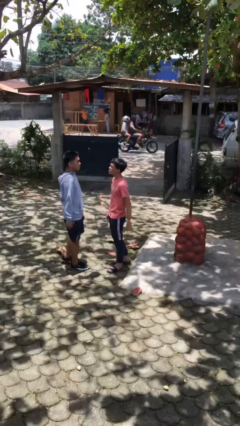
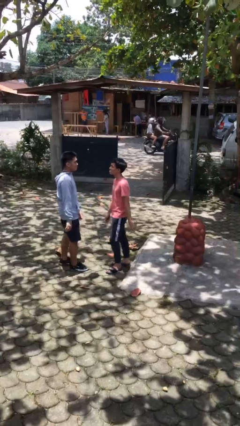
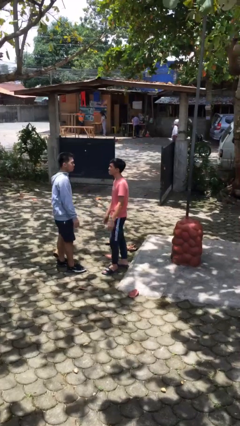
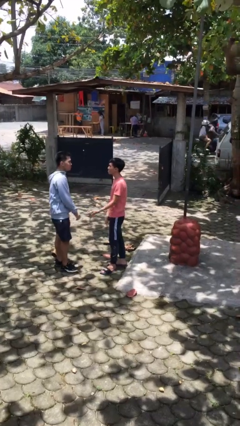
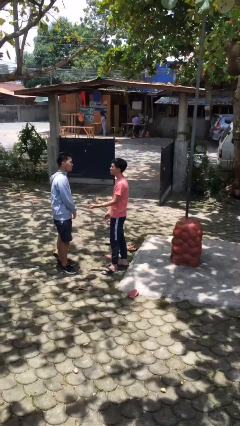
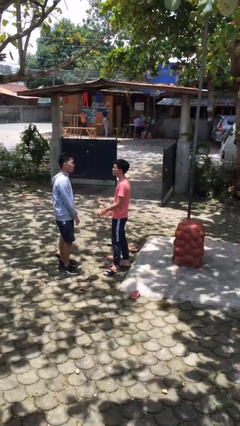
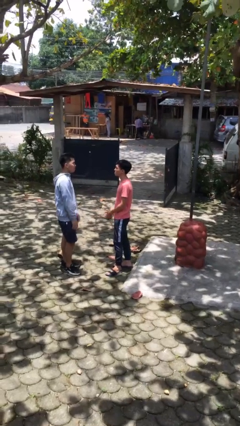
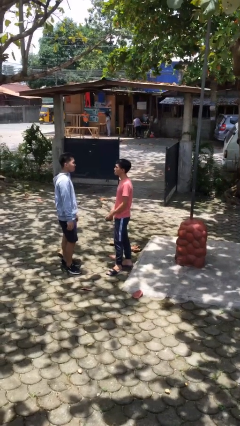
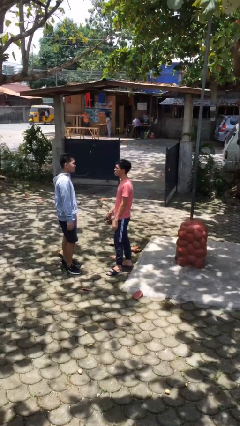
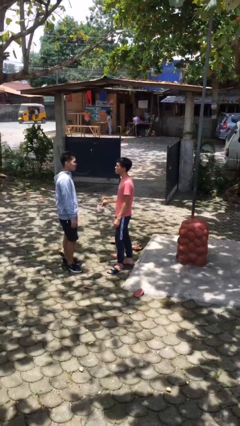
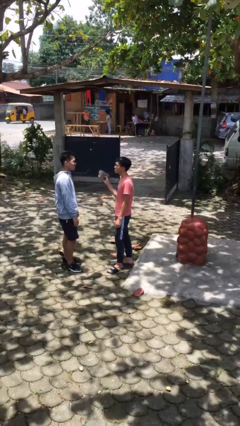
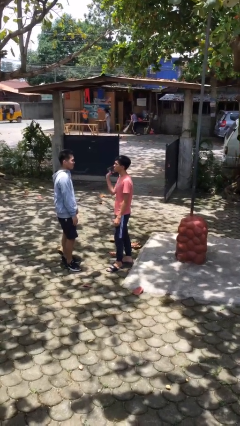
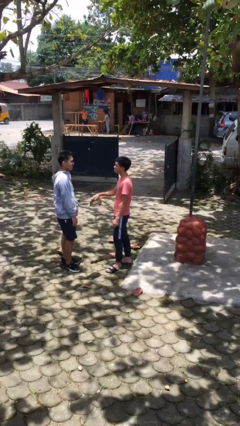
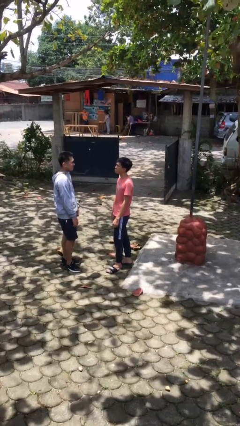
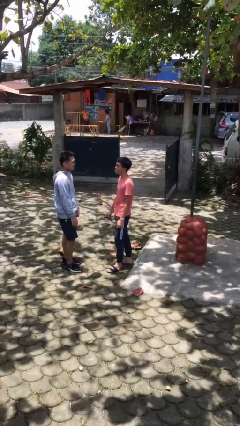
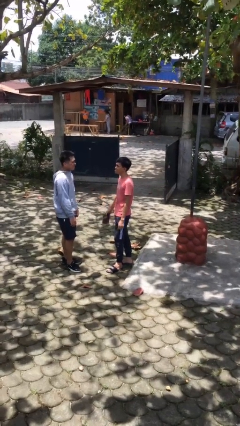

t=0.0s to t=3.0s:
person talks to person

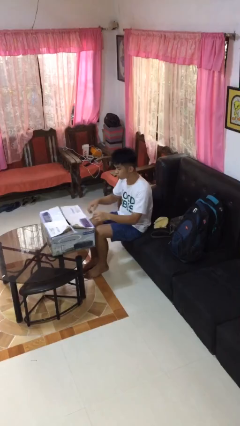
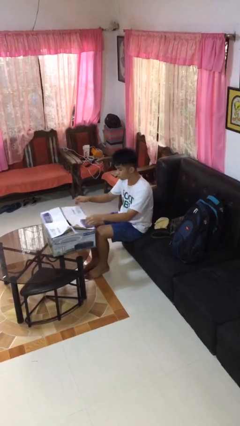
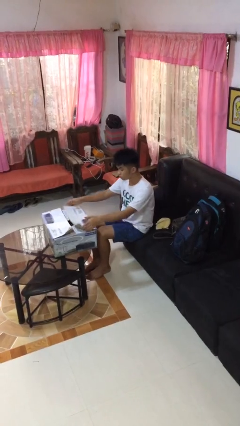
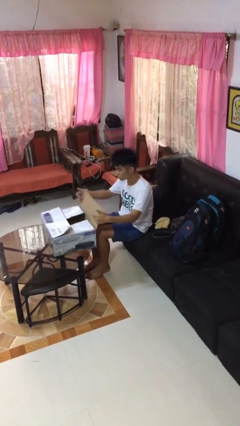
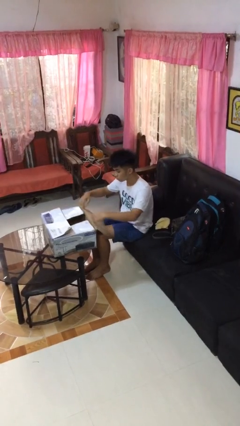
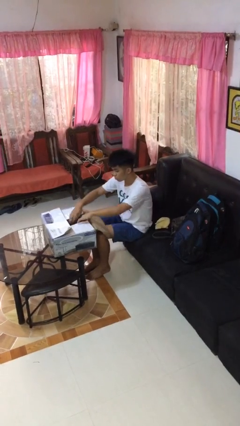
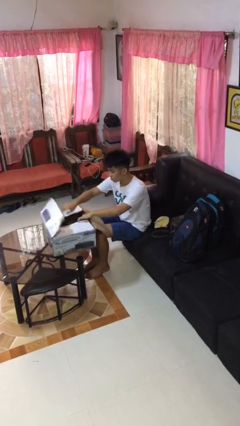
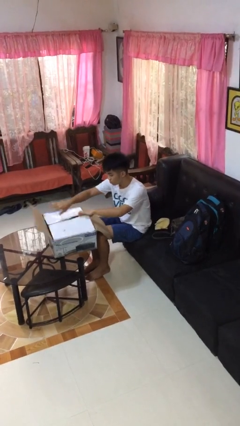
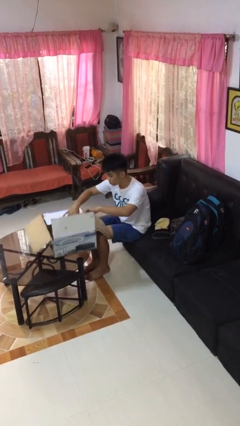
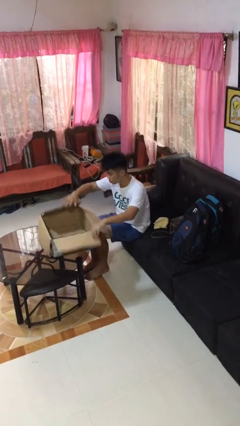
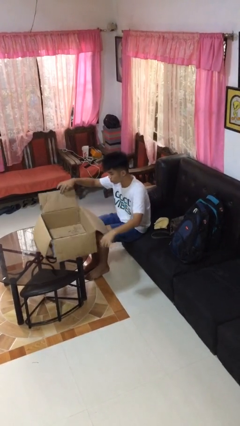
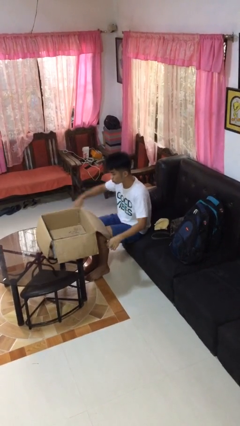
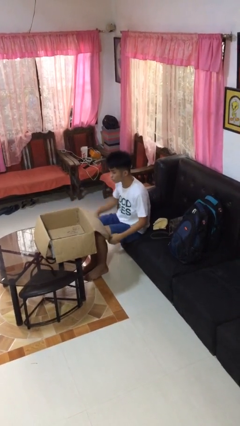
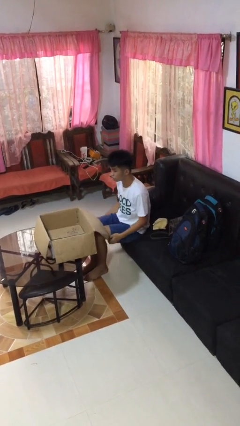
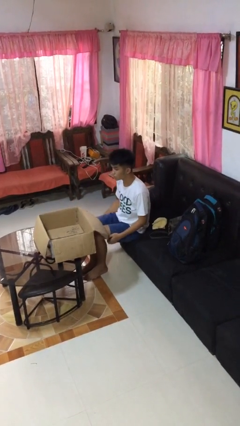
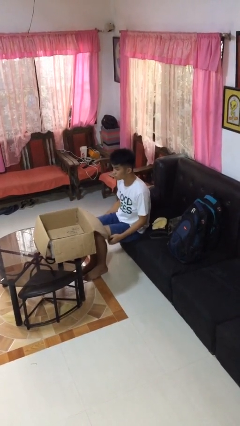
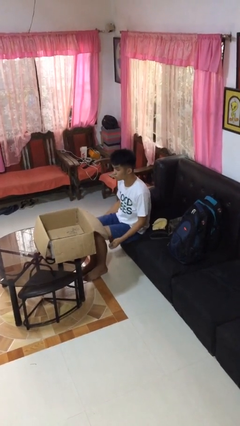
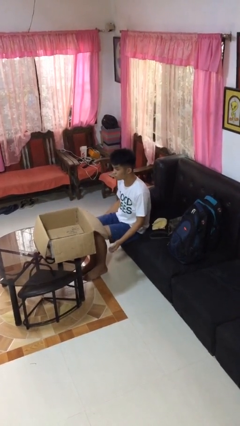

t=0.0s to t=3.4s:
person opens box

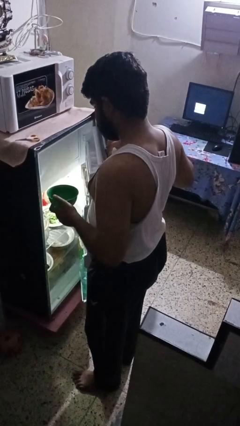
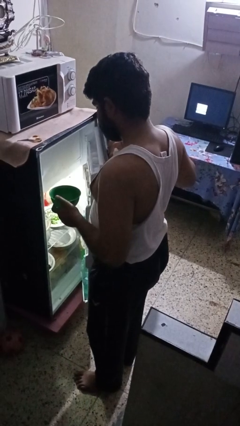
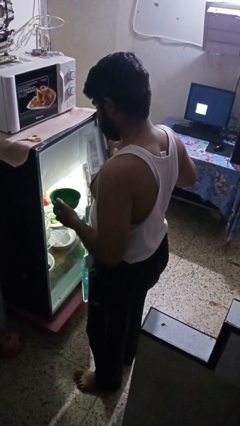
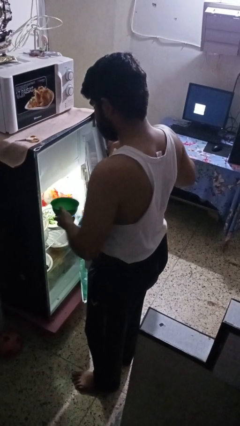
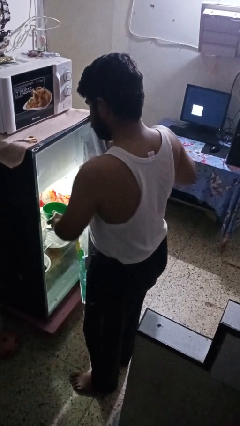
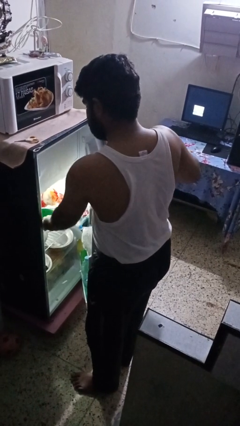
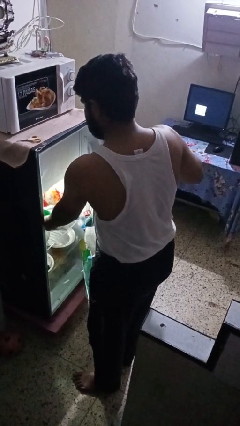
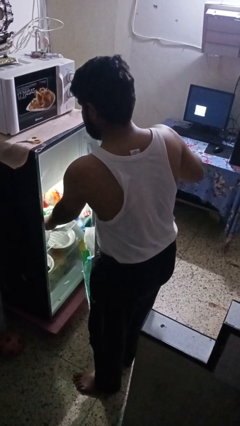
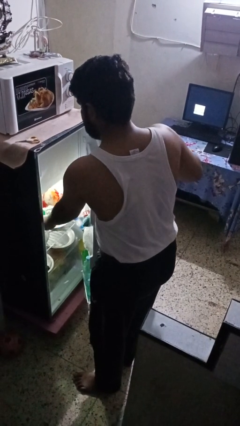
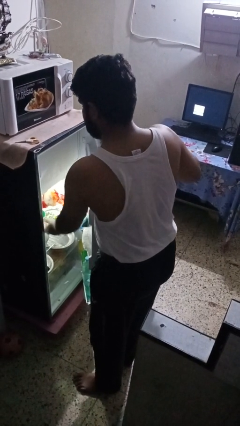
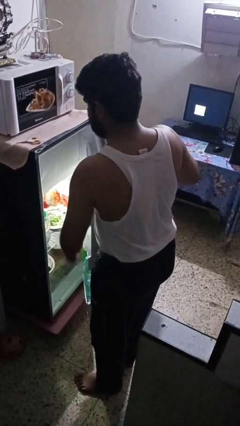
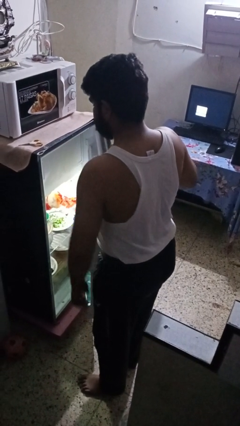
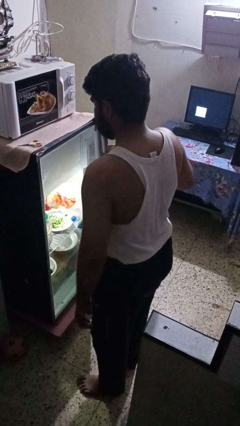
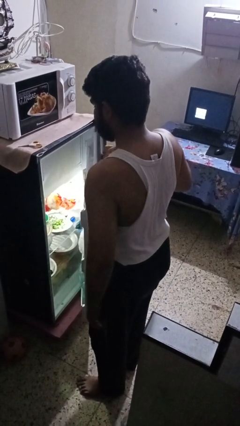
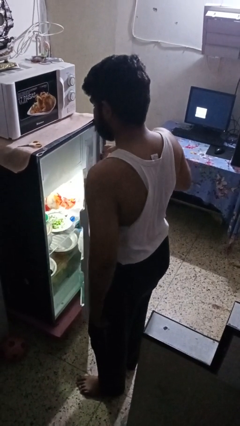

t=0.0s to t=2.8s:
person puts object into refrigerator

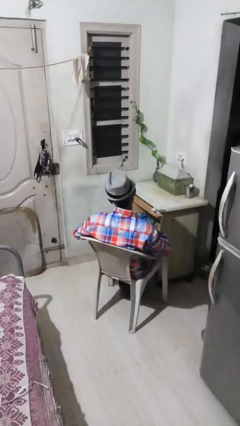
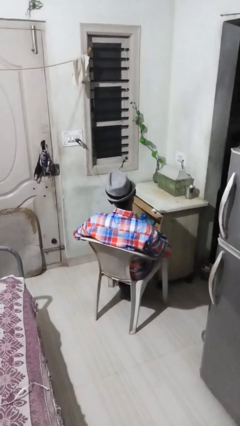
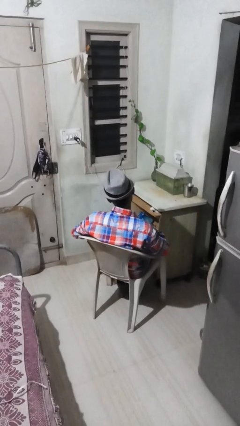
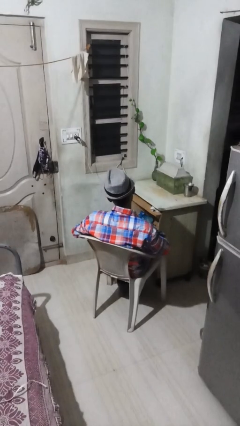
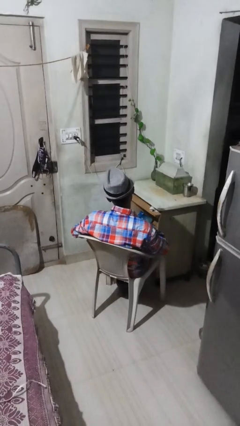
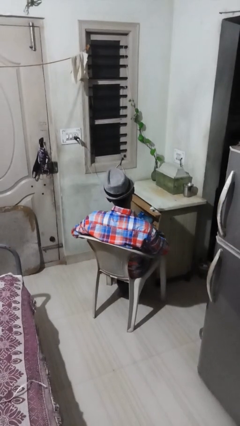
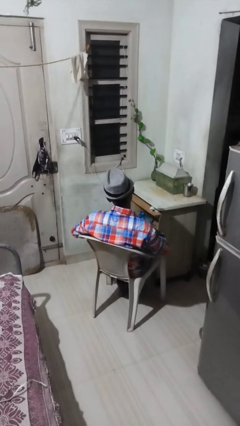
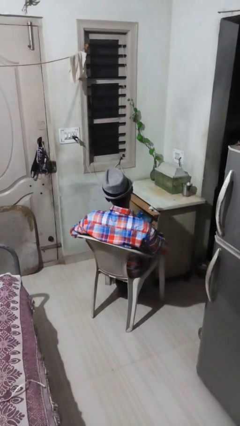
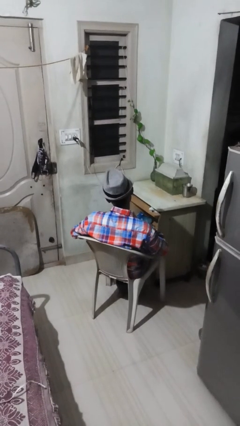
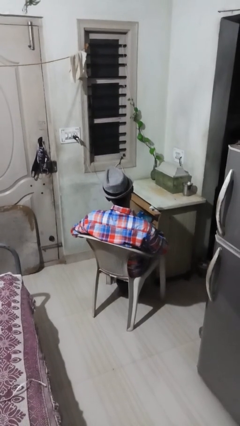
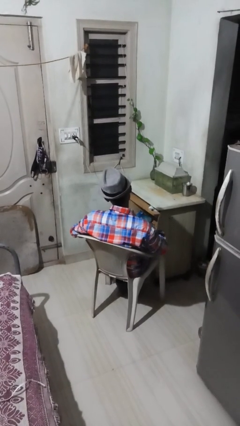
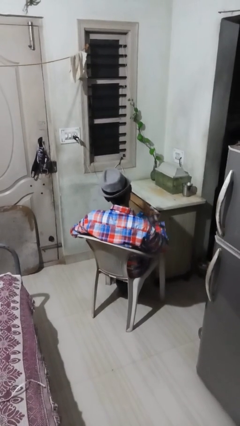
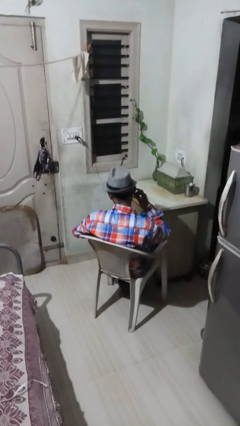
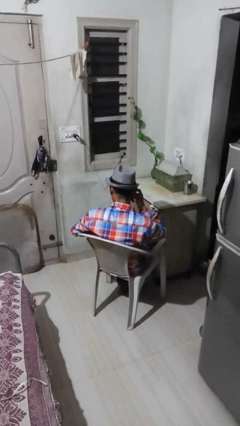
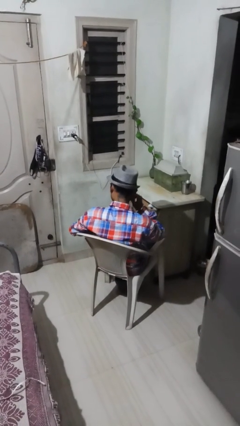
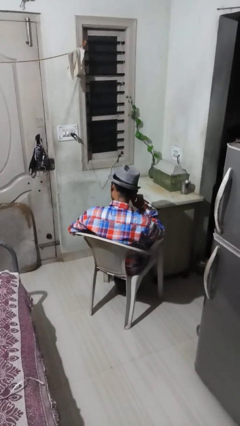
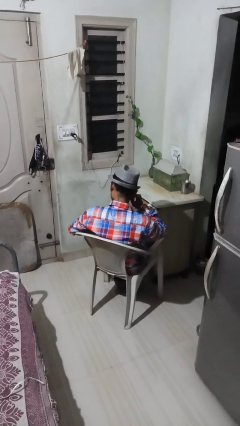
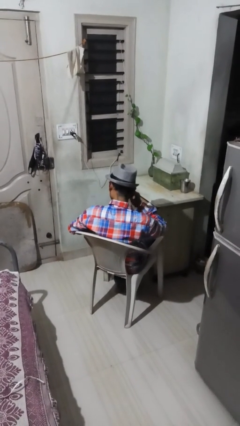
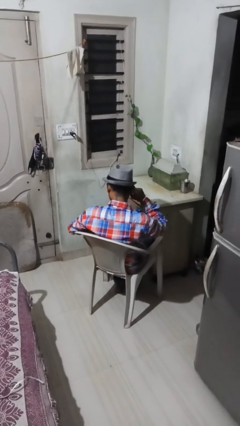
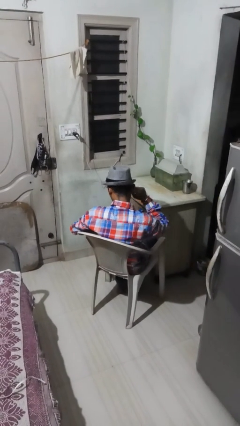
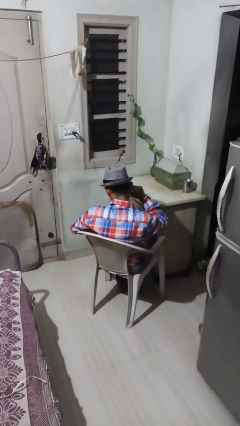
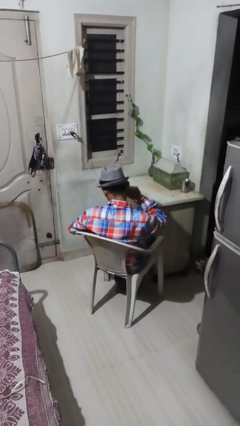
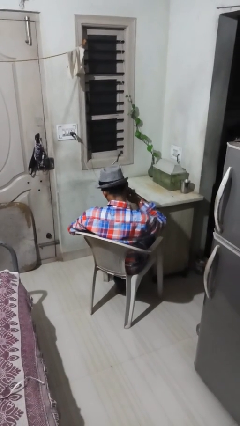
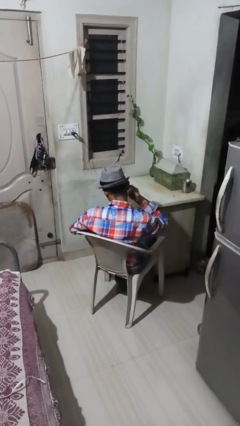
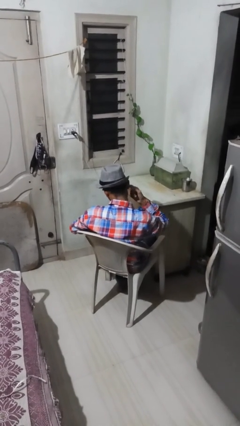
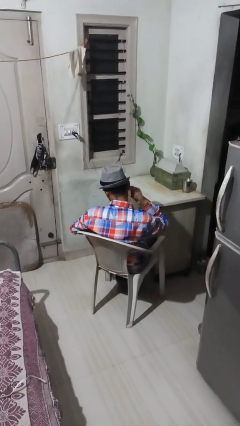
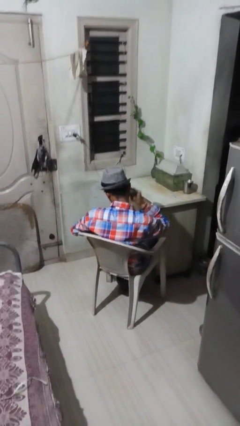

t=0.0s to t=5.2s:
person puts fingers in ear

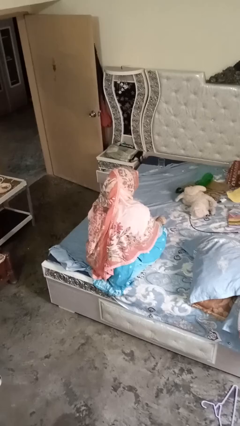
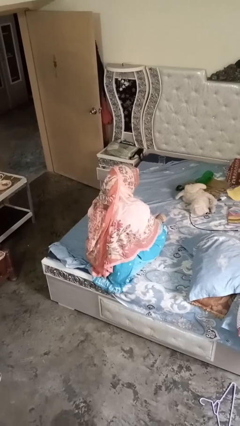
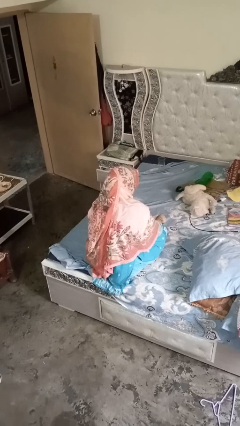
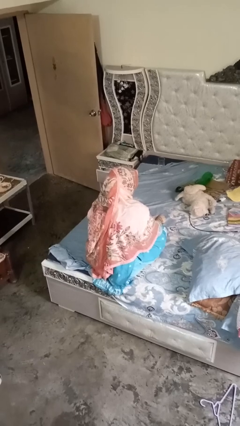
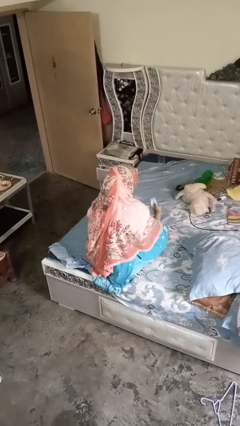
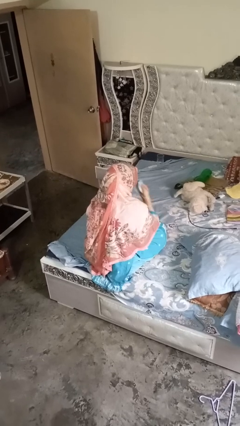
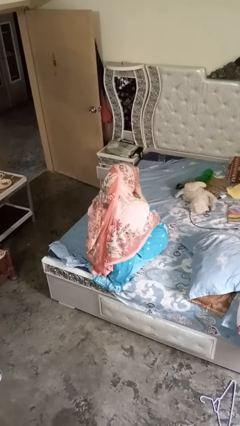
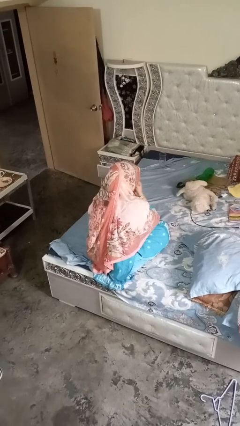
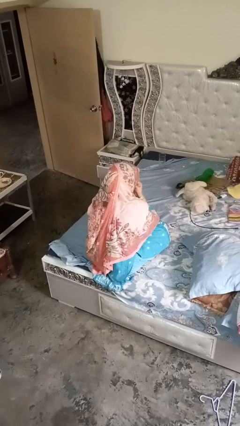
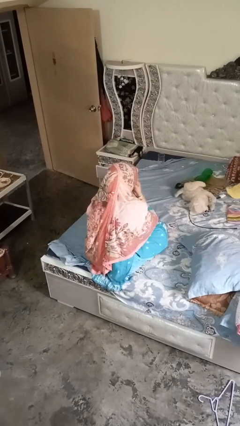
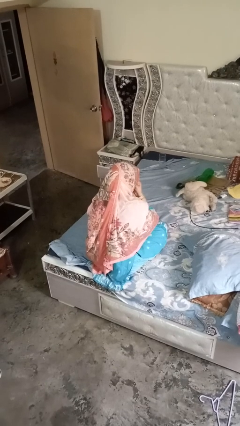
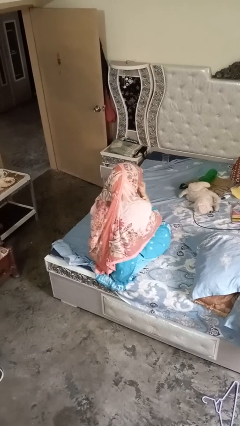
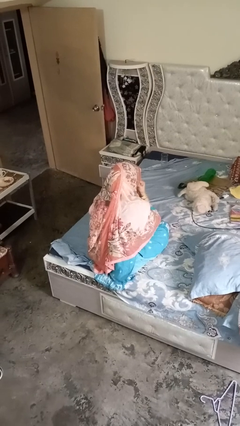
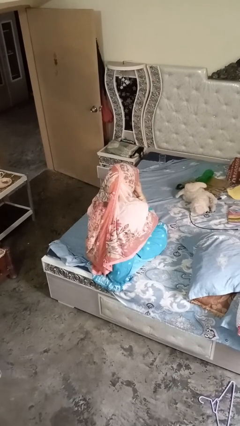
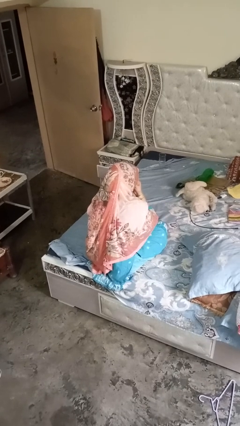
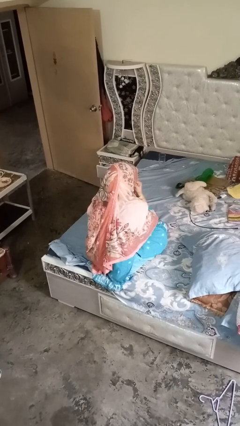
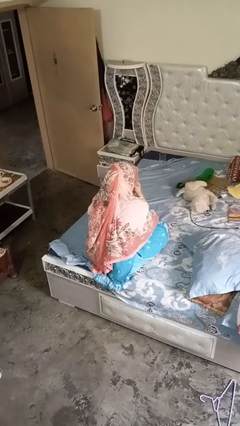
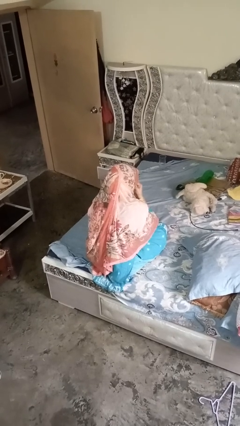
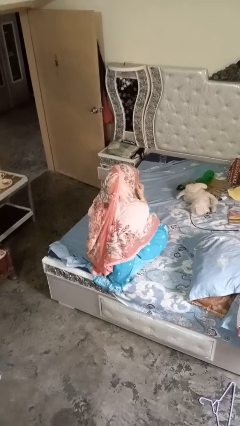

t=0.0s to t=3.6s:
person blows nose
